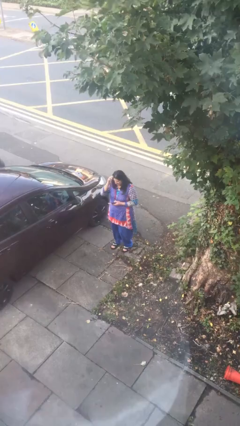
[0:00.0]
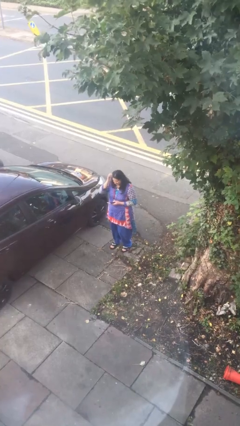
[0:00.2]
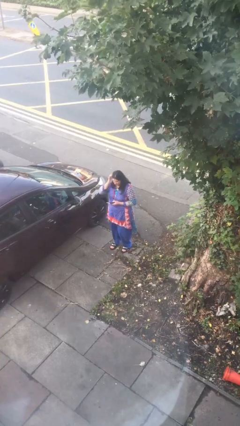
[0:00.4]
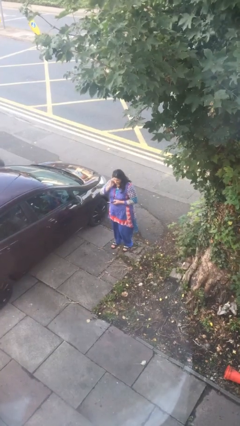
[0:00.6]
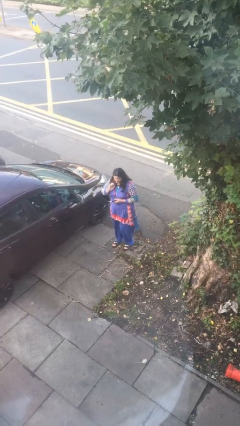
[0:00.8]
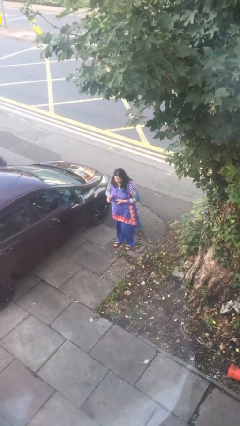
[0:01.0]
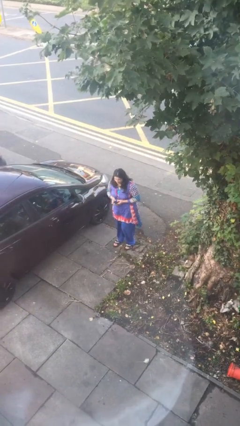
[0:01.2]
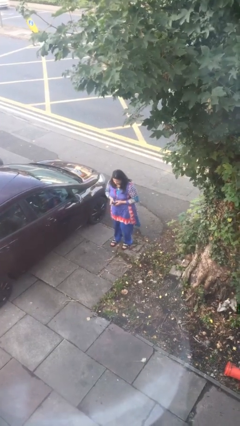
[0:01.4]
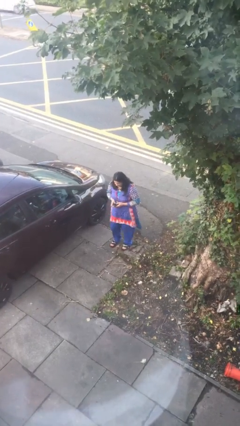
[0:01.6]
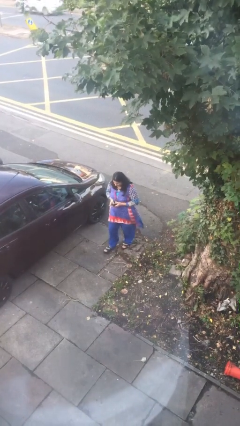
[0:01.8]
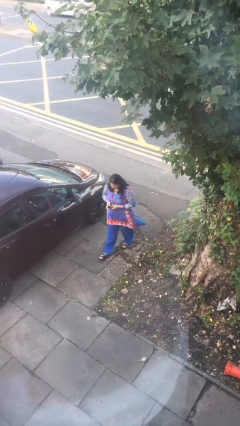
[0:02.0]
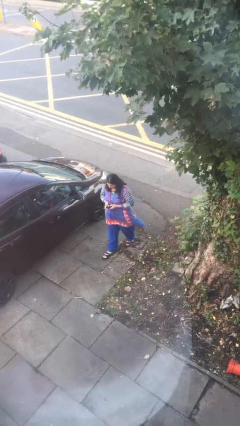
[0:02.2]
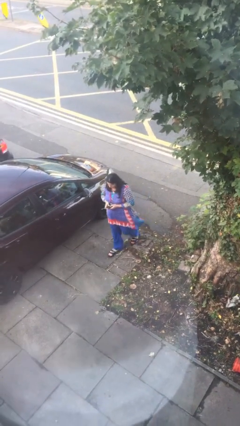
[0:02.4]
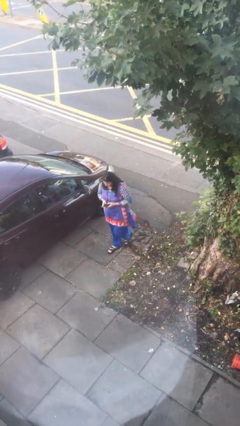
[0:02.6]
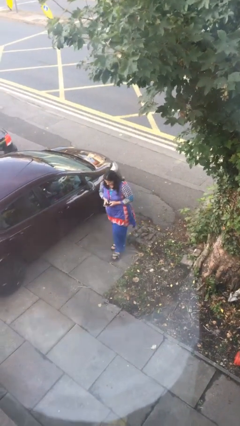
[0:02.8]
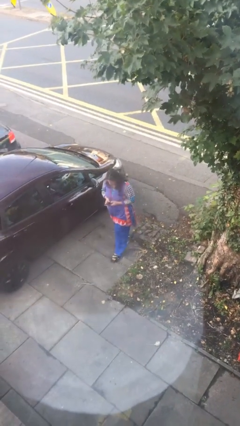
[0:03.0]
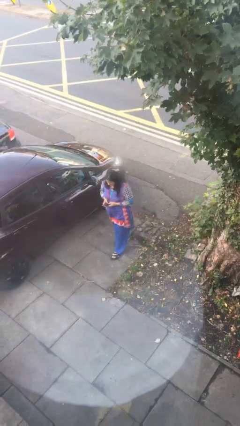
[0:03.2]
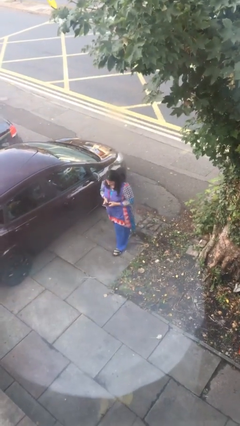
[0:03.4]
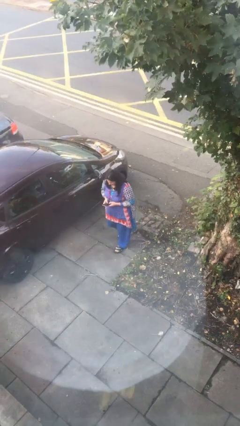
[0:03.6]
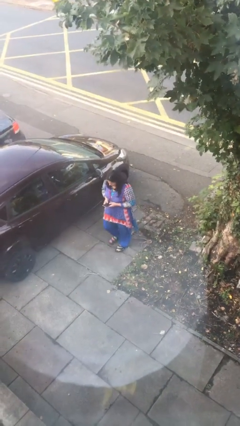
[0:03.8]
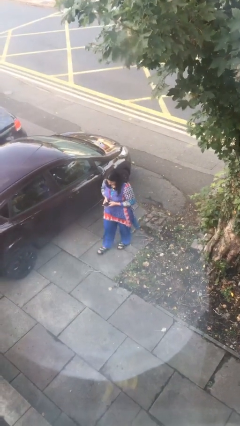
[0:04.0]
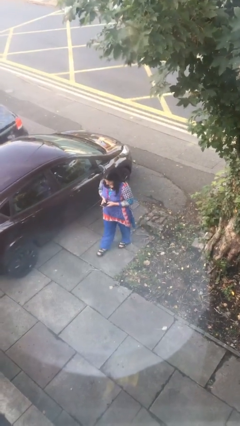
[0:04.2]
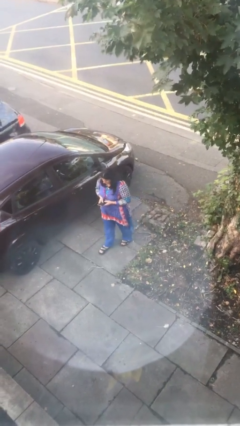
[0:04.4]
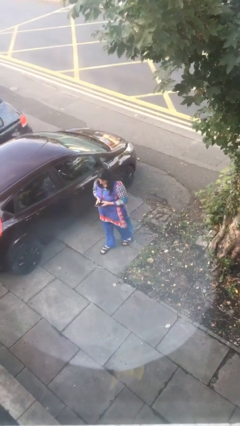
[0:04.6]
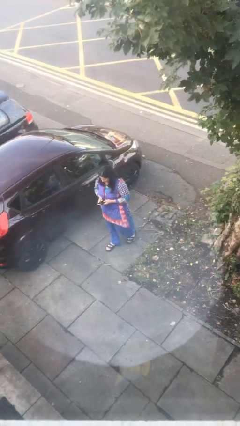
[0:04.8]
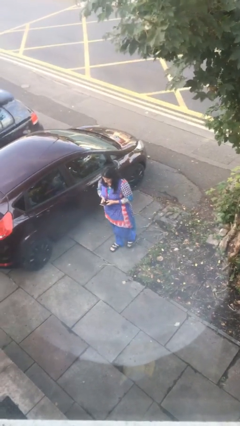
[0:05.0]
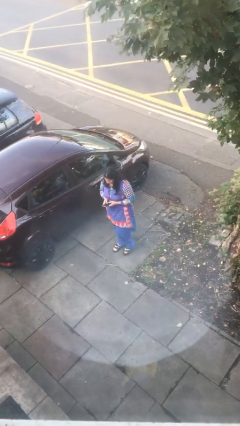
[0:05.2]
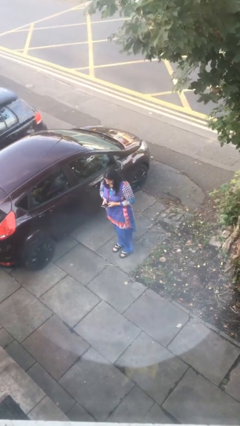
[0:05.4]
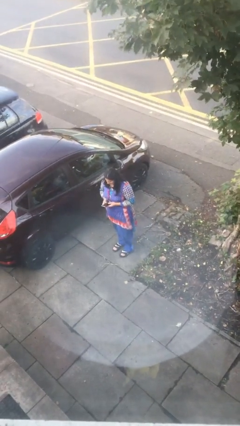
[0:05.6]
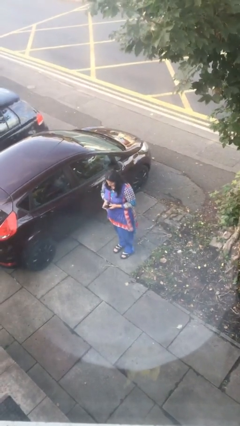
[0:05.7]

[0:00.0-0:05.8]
person texts on phone

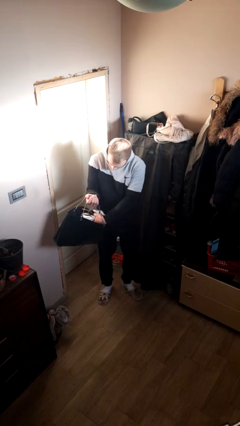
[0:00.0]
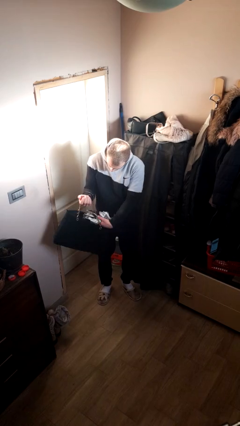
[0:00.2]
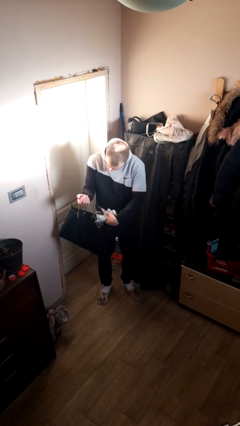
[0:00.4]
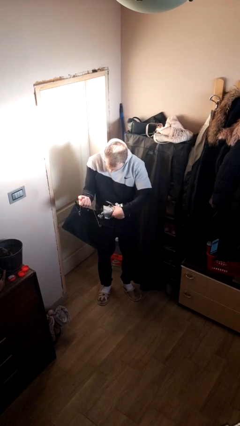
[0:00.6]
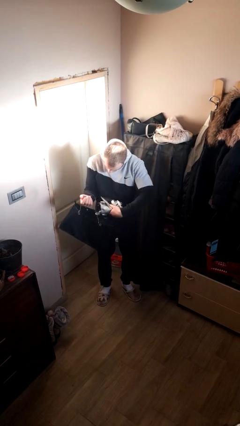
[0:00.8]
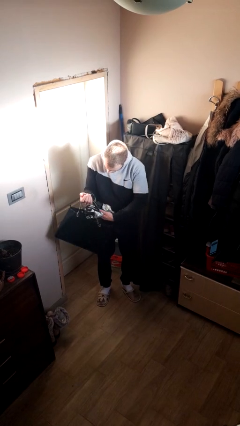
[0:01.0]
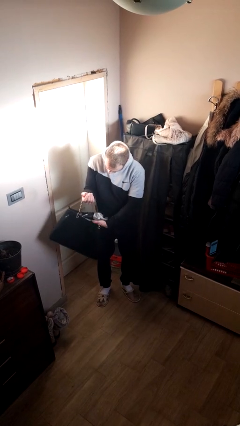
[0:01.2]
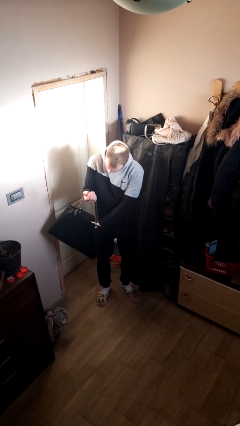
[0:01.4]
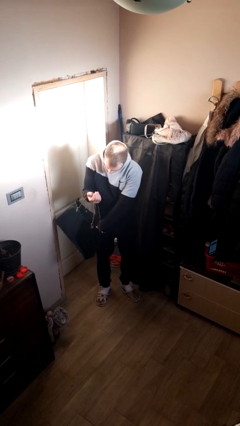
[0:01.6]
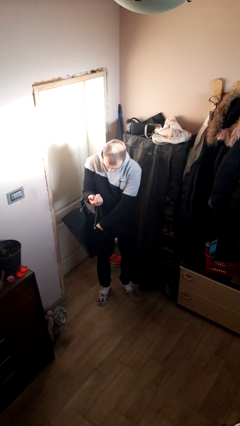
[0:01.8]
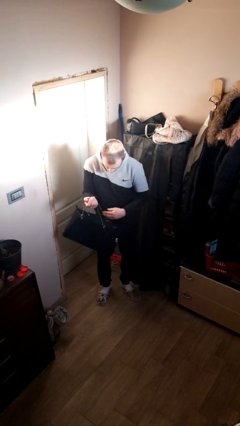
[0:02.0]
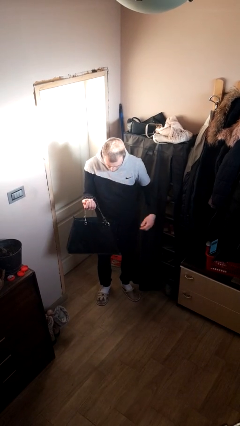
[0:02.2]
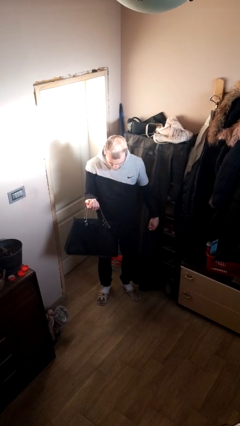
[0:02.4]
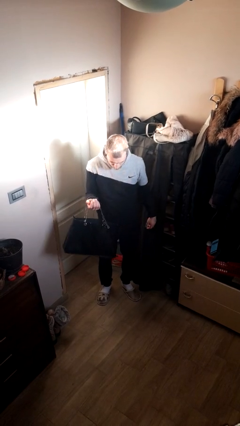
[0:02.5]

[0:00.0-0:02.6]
person puts object into purse

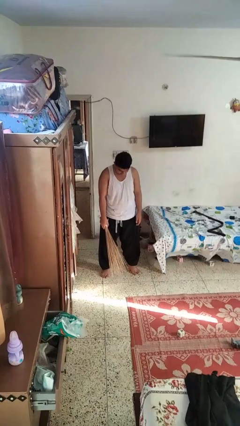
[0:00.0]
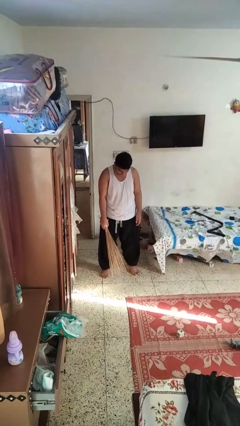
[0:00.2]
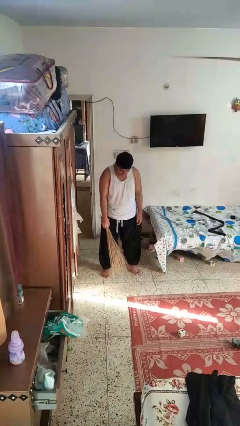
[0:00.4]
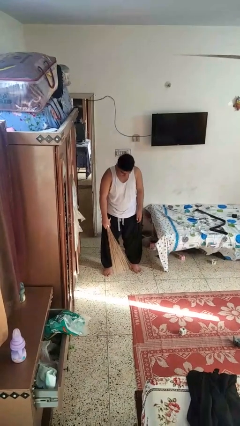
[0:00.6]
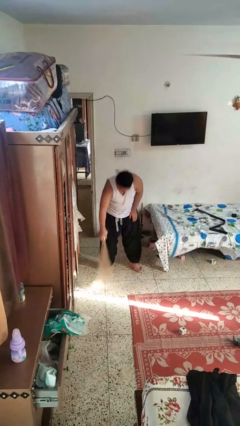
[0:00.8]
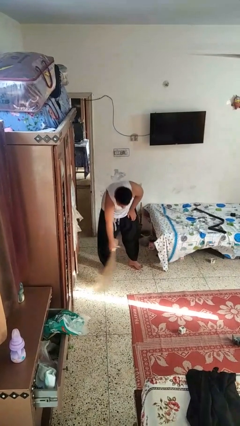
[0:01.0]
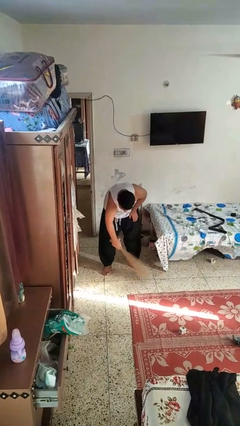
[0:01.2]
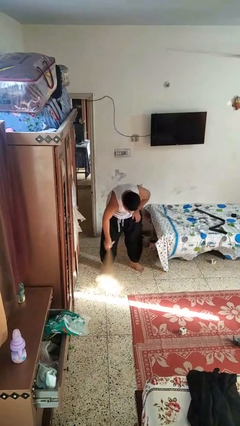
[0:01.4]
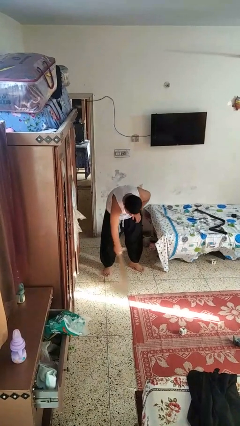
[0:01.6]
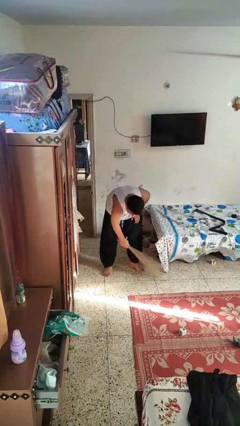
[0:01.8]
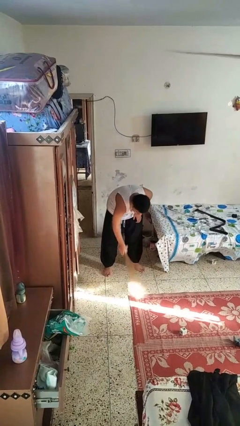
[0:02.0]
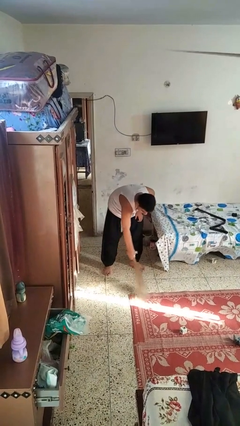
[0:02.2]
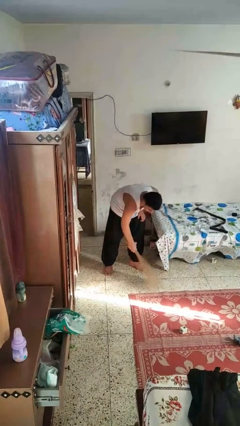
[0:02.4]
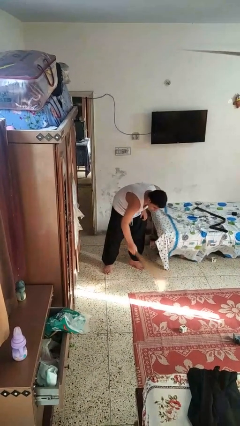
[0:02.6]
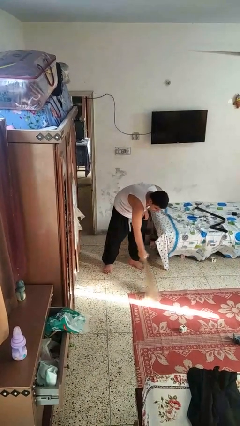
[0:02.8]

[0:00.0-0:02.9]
person sweeps floor

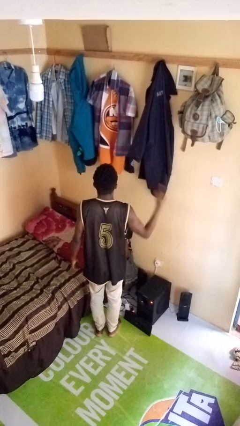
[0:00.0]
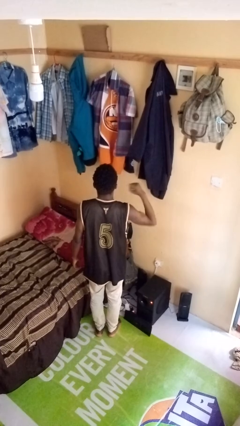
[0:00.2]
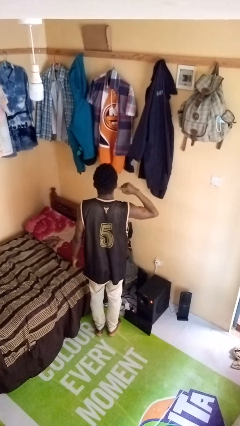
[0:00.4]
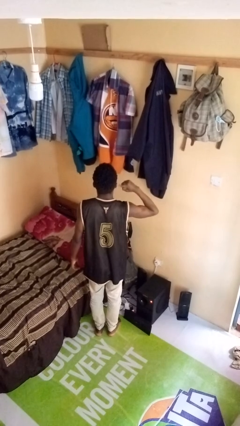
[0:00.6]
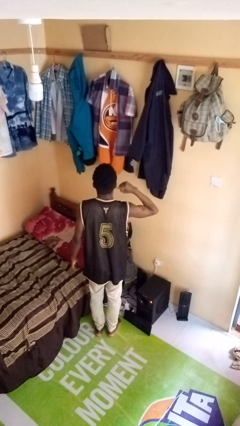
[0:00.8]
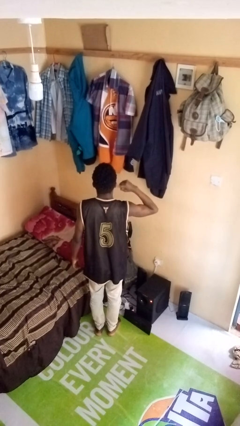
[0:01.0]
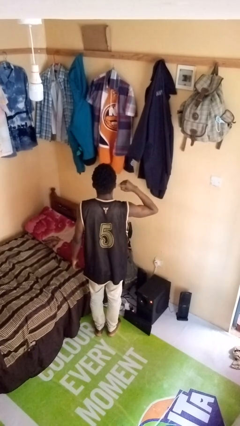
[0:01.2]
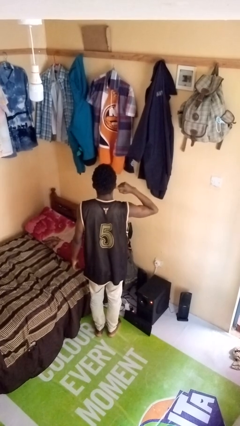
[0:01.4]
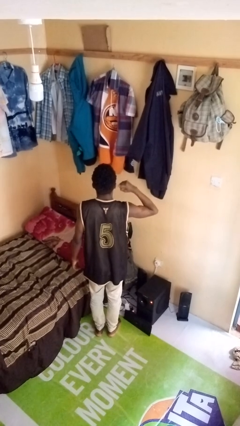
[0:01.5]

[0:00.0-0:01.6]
person gestures listen closely

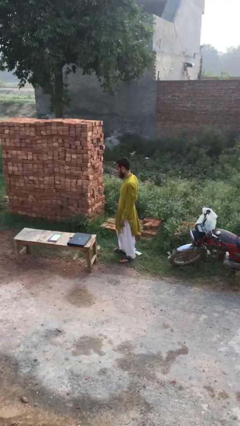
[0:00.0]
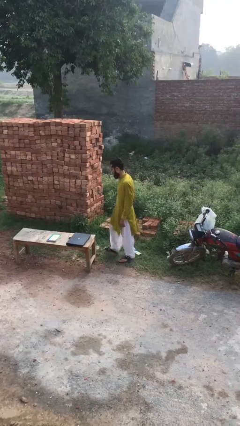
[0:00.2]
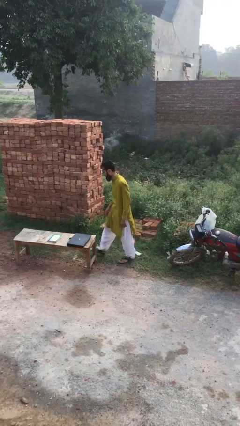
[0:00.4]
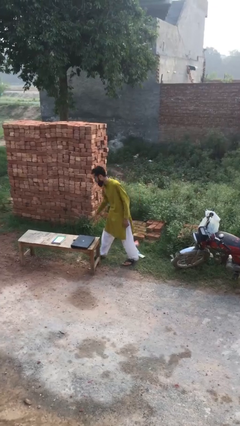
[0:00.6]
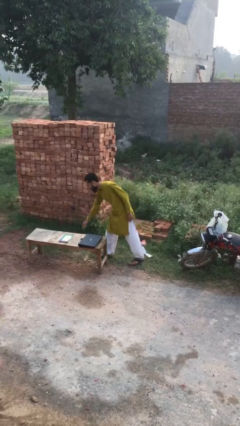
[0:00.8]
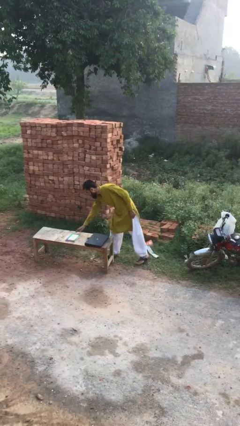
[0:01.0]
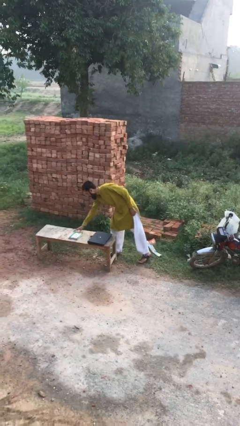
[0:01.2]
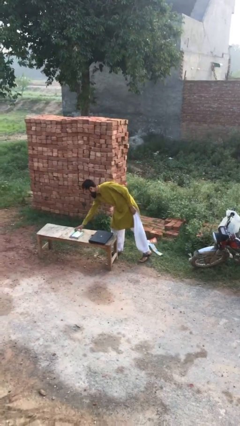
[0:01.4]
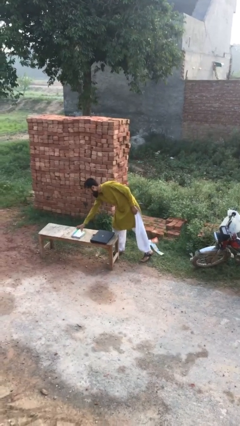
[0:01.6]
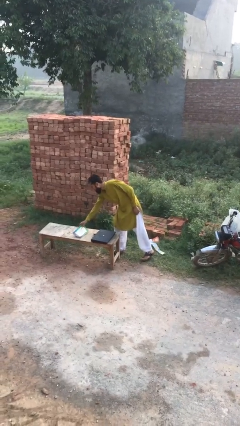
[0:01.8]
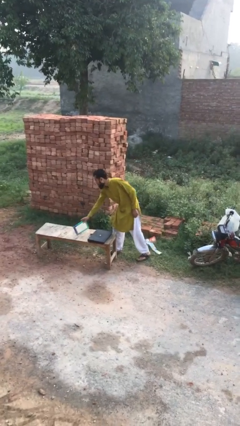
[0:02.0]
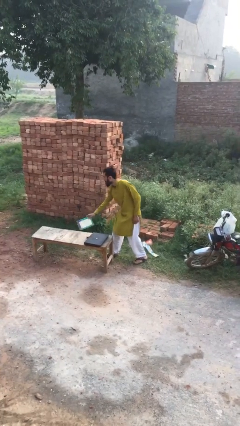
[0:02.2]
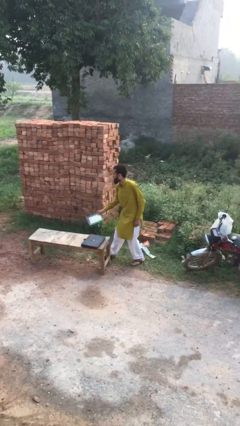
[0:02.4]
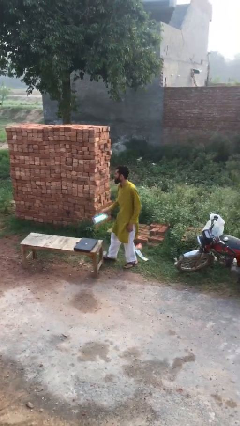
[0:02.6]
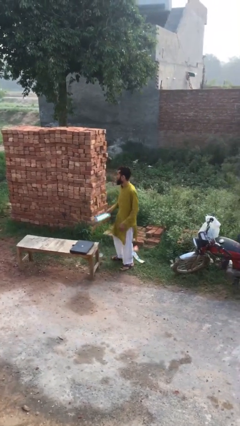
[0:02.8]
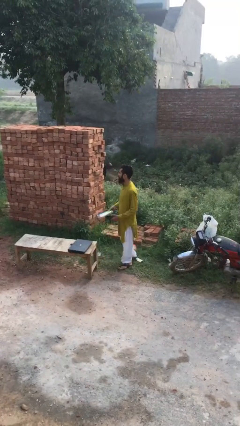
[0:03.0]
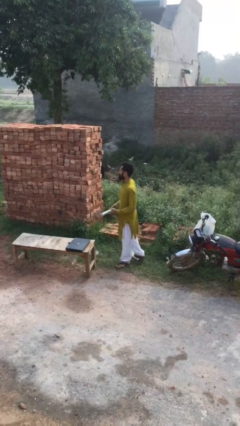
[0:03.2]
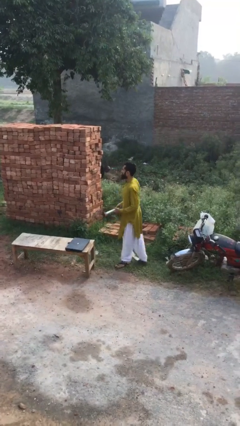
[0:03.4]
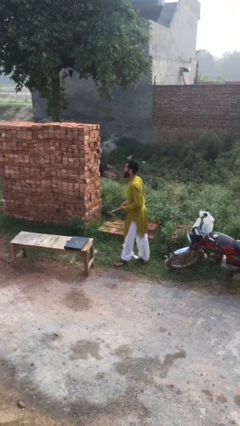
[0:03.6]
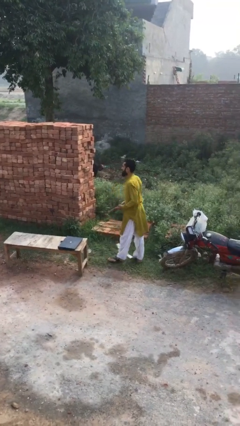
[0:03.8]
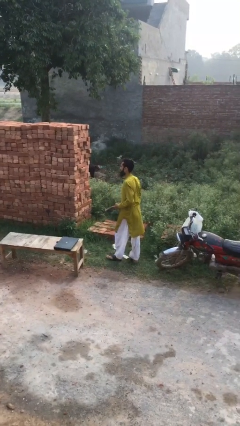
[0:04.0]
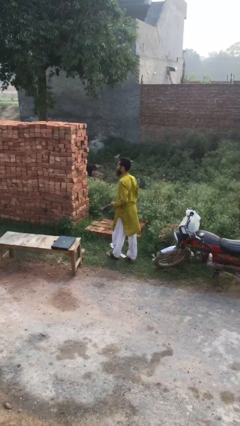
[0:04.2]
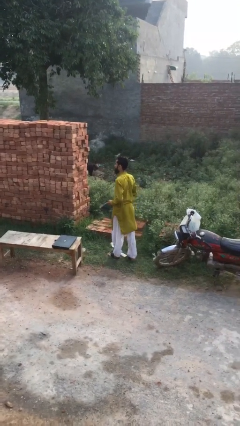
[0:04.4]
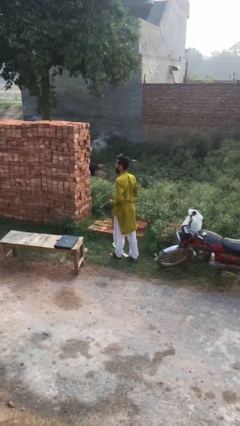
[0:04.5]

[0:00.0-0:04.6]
person picks up object from table
